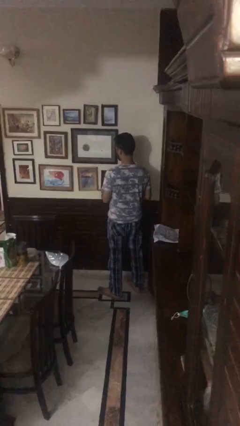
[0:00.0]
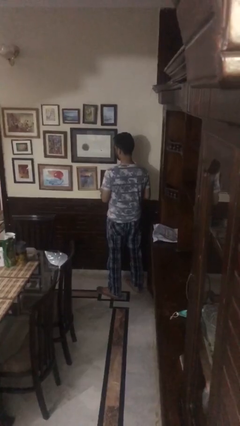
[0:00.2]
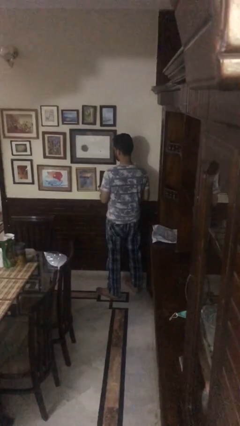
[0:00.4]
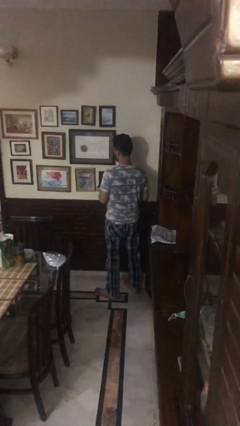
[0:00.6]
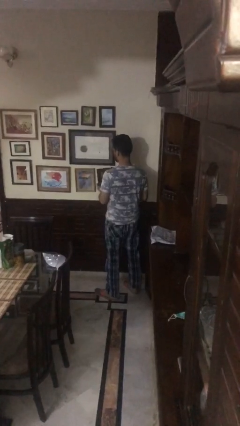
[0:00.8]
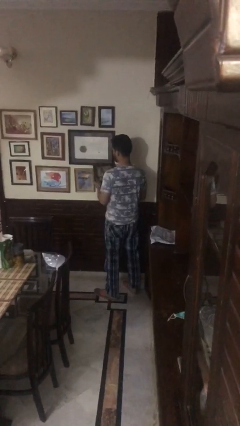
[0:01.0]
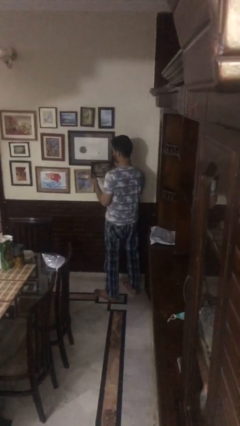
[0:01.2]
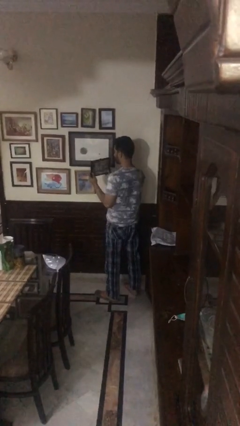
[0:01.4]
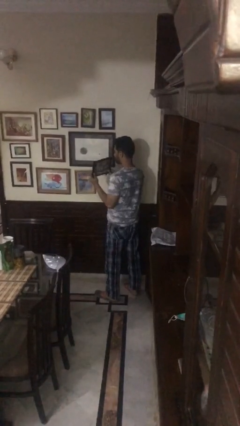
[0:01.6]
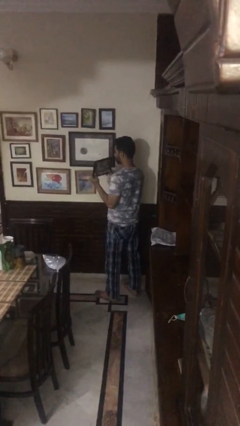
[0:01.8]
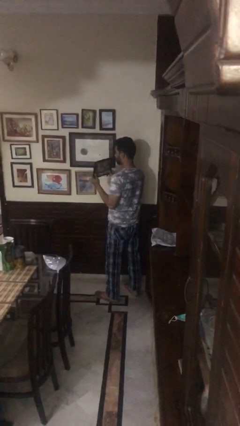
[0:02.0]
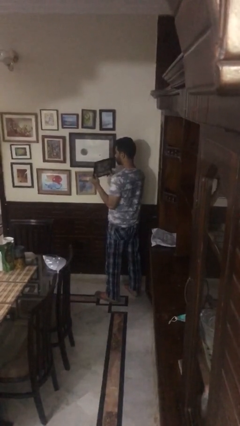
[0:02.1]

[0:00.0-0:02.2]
person takes down picture frame

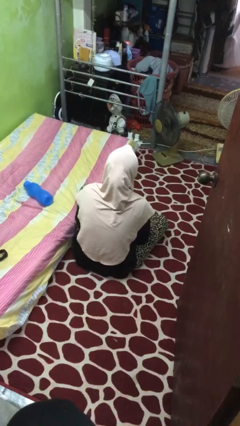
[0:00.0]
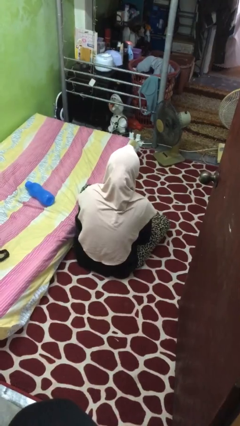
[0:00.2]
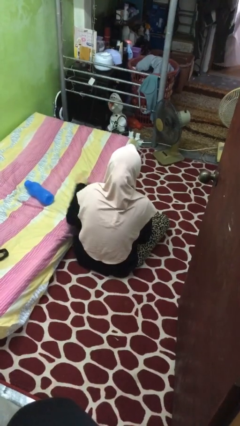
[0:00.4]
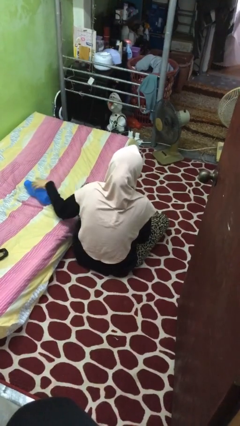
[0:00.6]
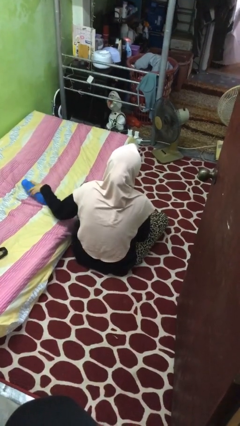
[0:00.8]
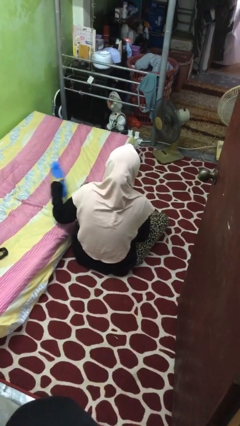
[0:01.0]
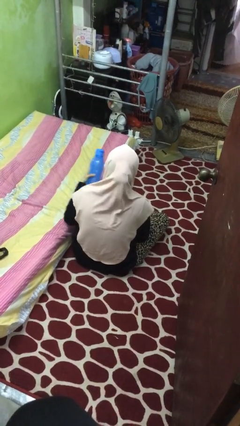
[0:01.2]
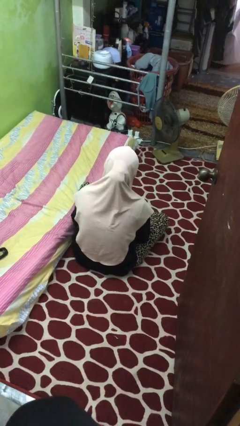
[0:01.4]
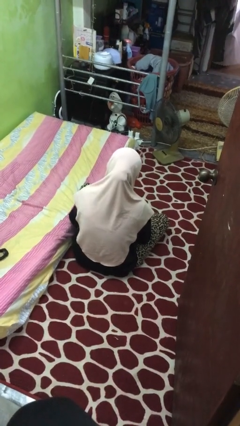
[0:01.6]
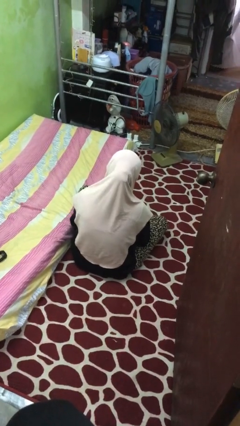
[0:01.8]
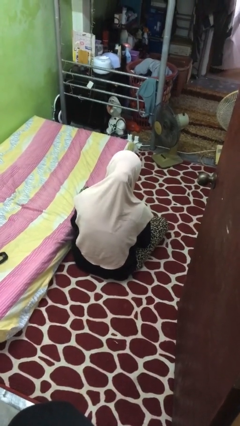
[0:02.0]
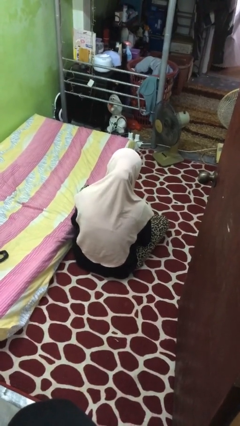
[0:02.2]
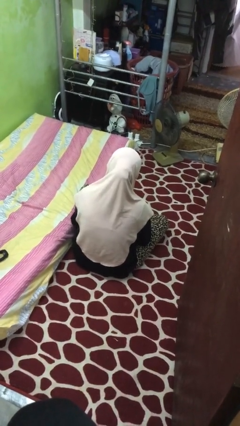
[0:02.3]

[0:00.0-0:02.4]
person picks up object from bed

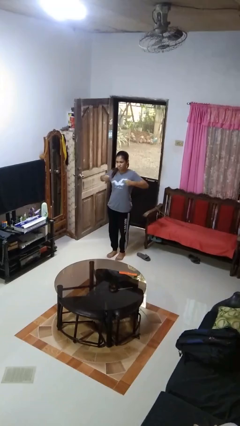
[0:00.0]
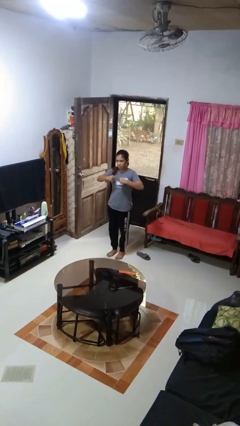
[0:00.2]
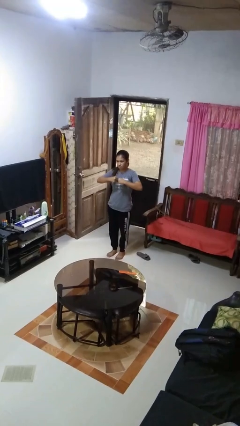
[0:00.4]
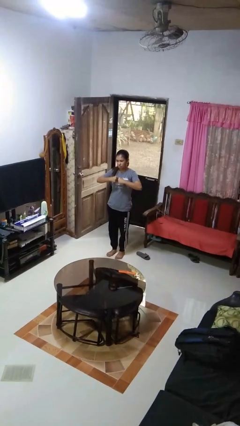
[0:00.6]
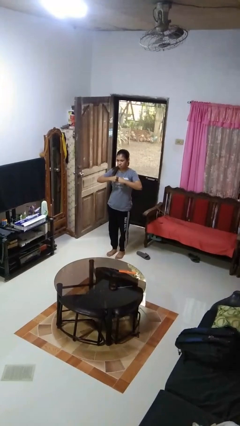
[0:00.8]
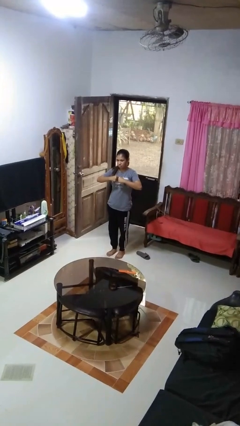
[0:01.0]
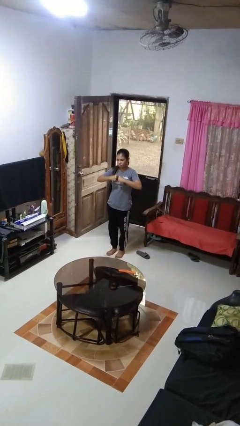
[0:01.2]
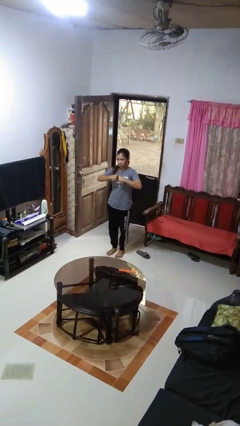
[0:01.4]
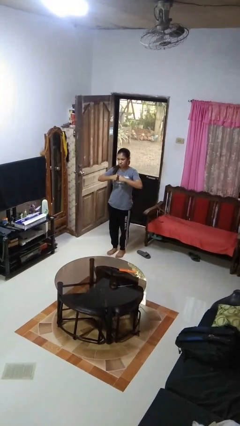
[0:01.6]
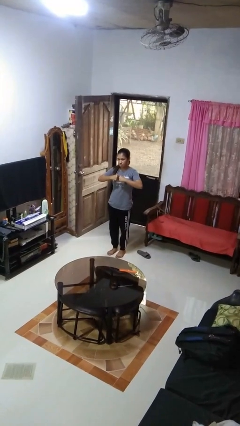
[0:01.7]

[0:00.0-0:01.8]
person gestures zoom out

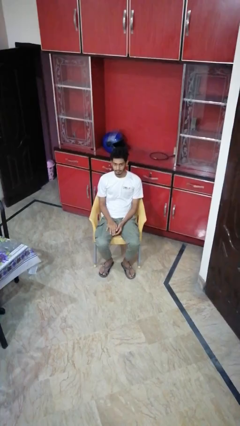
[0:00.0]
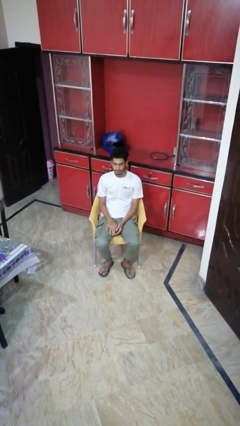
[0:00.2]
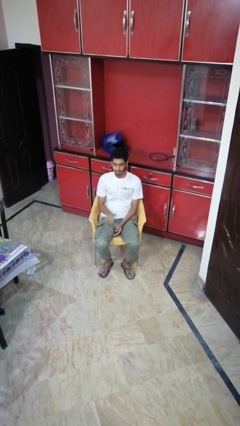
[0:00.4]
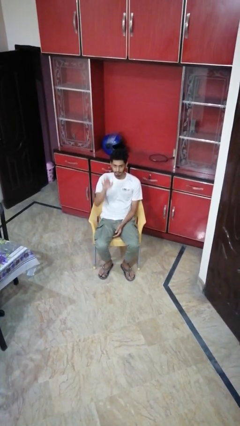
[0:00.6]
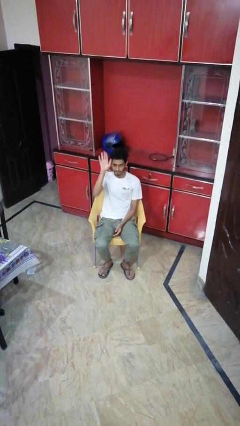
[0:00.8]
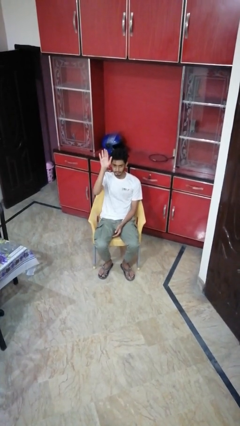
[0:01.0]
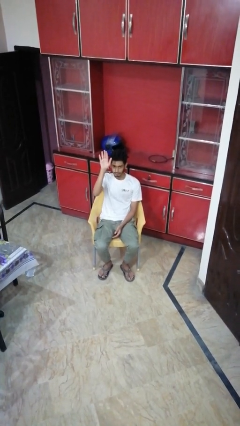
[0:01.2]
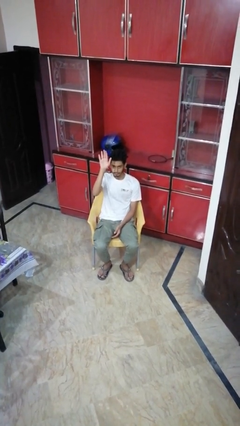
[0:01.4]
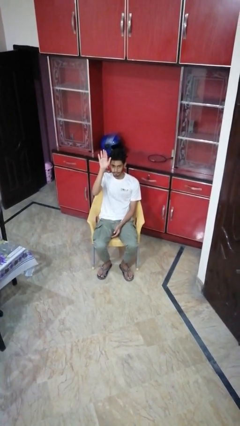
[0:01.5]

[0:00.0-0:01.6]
person gestures raise hand

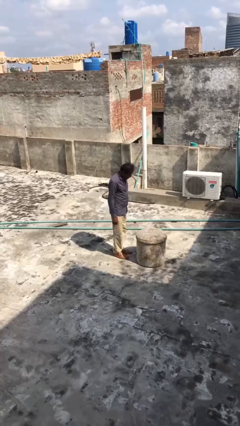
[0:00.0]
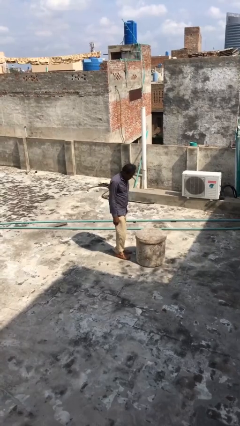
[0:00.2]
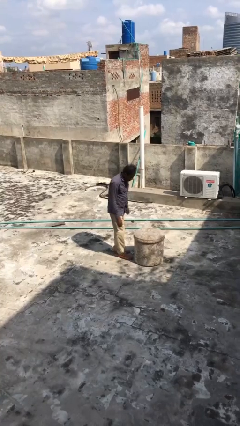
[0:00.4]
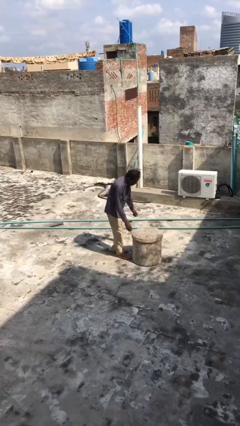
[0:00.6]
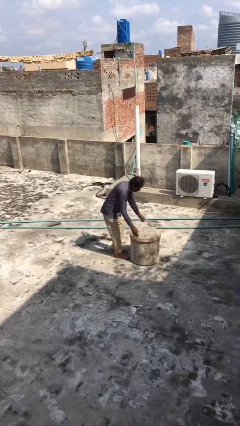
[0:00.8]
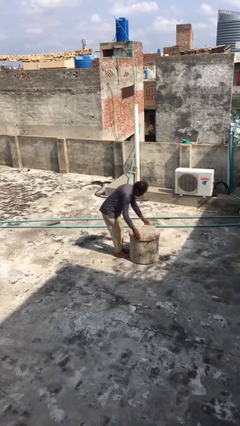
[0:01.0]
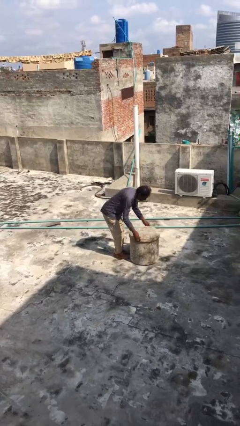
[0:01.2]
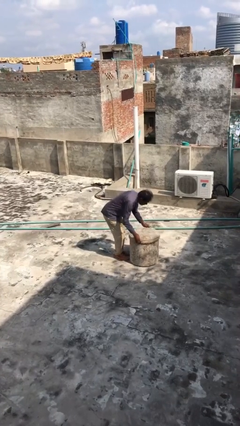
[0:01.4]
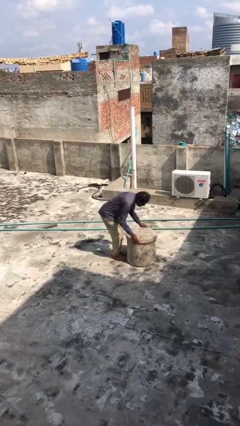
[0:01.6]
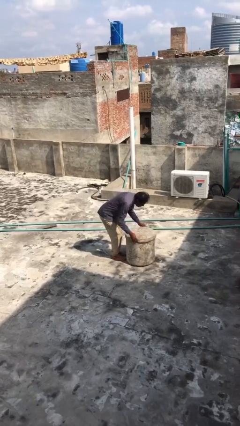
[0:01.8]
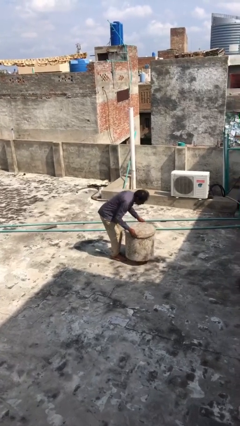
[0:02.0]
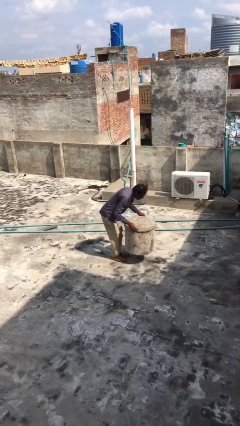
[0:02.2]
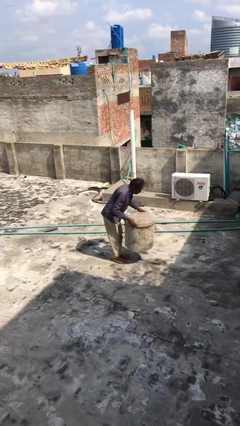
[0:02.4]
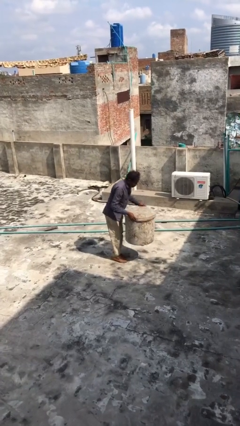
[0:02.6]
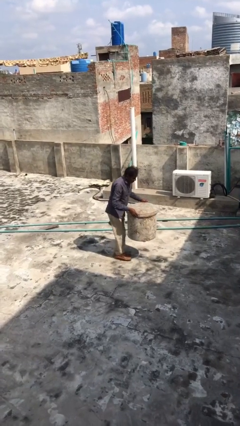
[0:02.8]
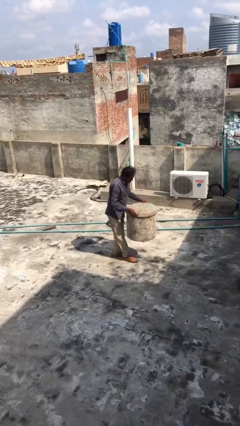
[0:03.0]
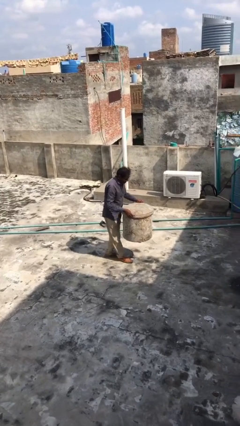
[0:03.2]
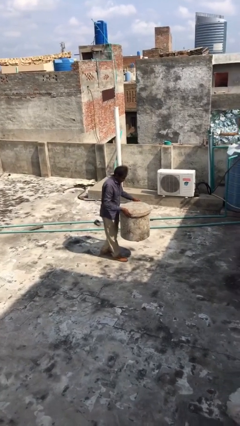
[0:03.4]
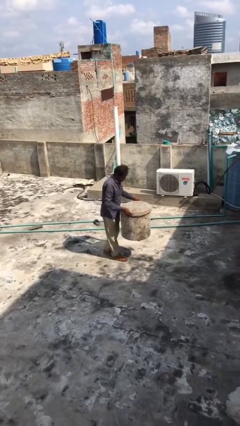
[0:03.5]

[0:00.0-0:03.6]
person picks up object from floor

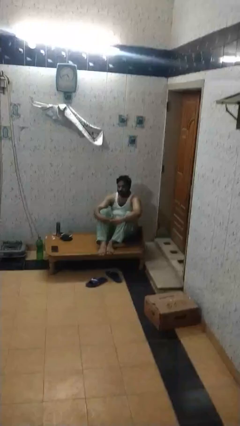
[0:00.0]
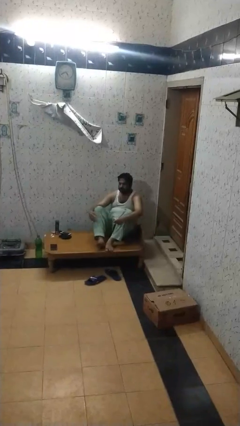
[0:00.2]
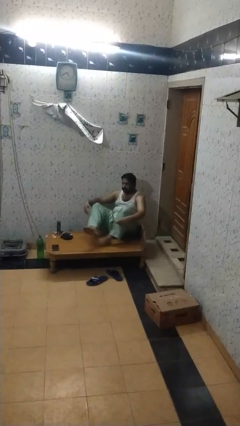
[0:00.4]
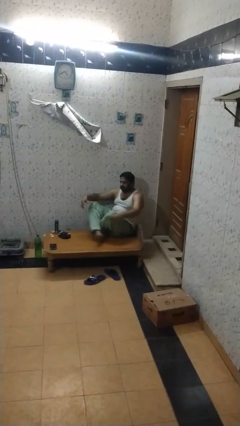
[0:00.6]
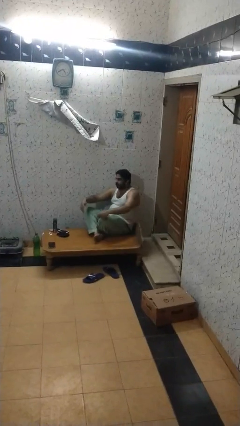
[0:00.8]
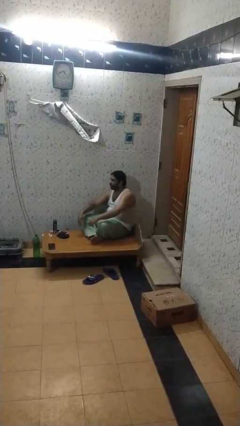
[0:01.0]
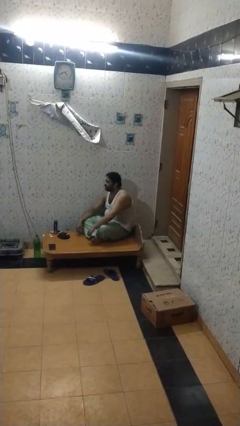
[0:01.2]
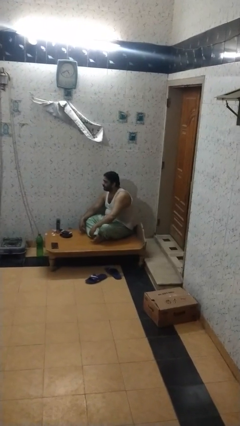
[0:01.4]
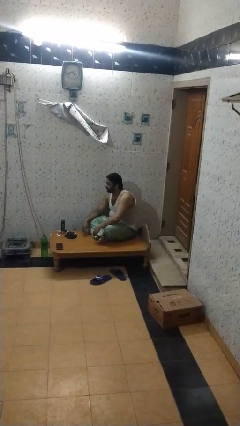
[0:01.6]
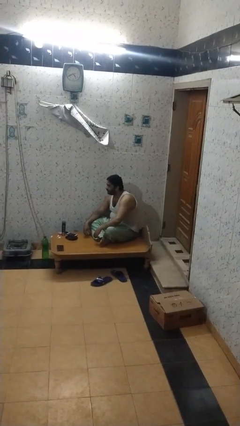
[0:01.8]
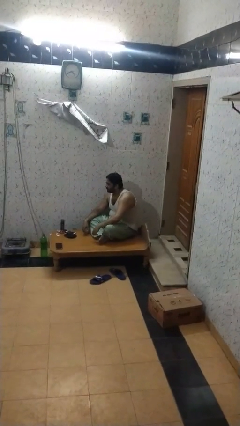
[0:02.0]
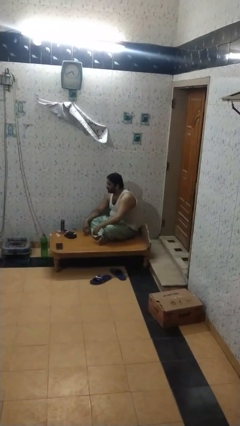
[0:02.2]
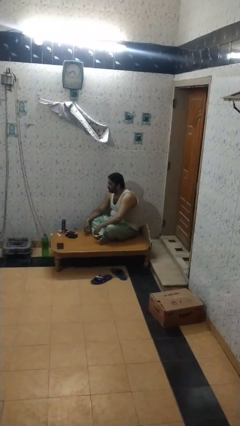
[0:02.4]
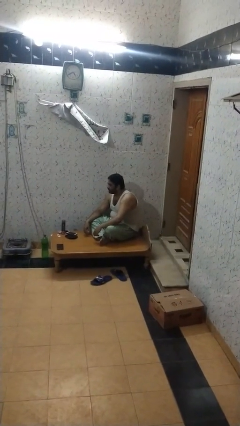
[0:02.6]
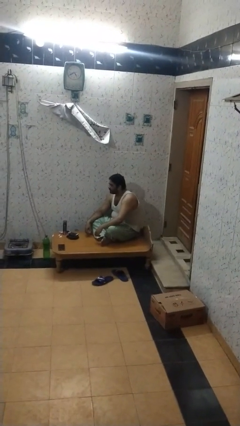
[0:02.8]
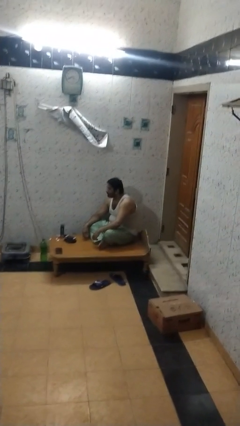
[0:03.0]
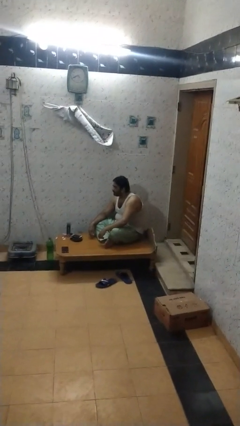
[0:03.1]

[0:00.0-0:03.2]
person crosses legs

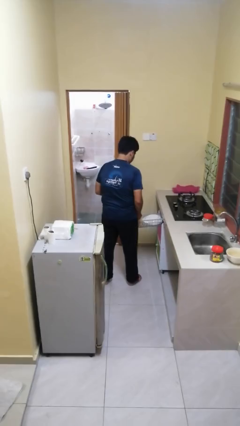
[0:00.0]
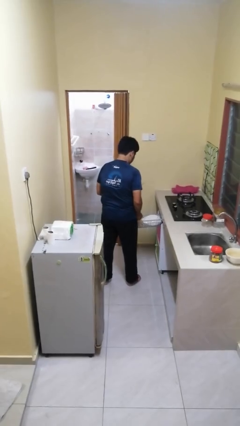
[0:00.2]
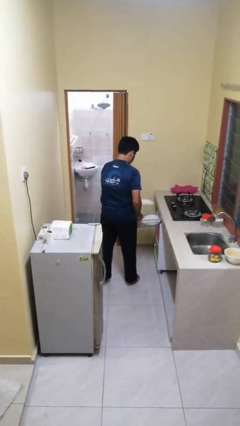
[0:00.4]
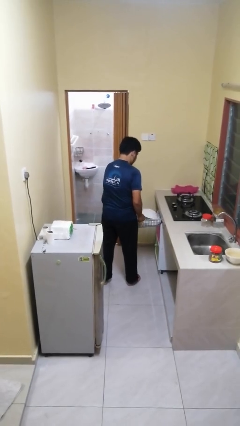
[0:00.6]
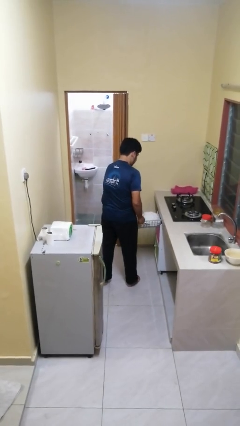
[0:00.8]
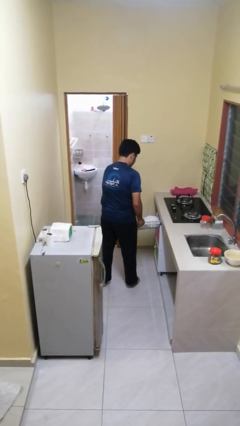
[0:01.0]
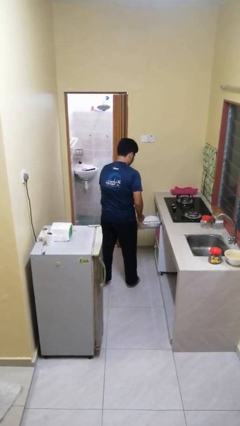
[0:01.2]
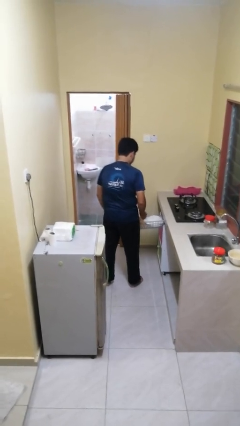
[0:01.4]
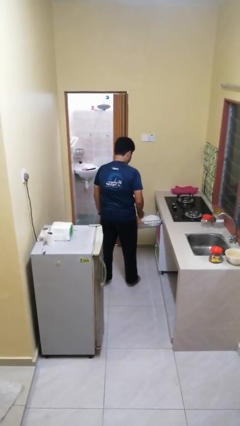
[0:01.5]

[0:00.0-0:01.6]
person puts object into kitchen drawer

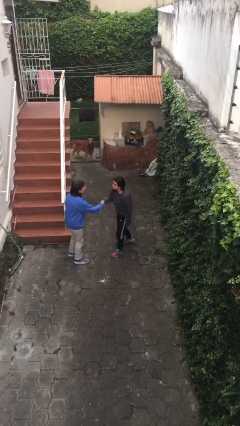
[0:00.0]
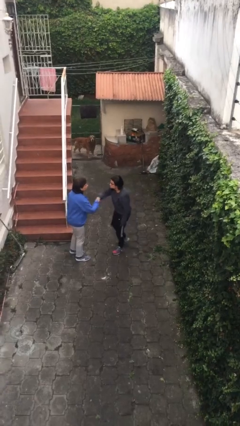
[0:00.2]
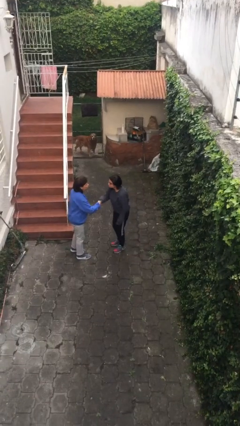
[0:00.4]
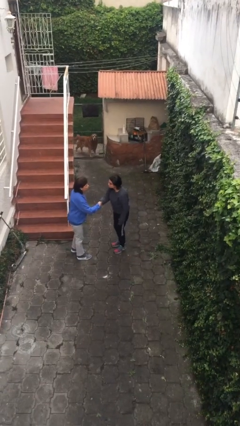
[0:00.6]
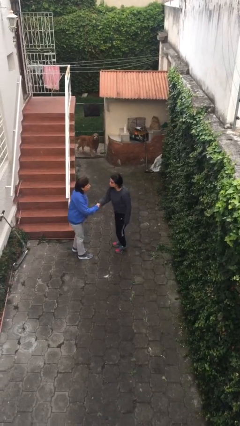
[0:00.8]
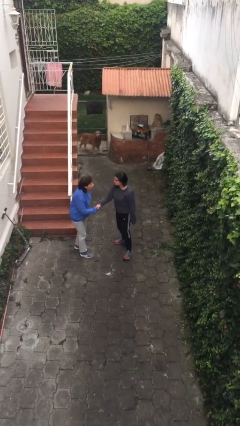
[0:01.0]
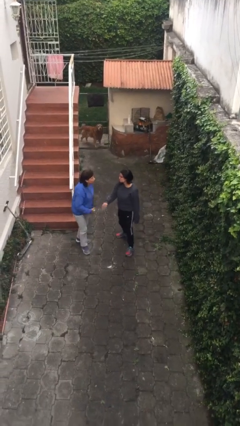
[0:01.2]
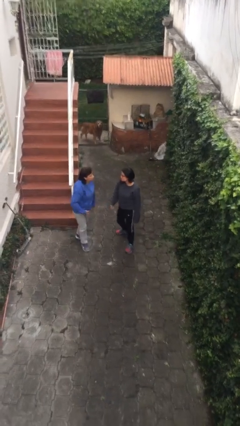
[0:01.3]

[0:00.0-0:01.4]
person shakes hand
